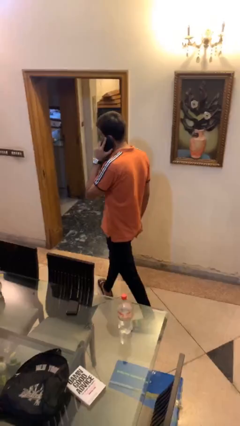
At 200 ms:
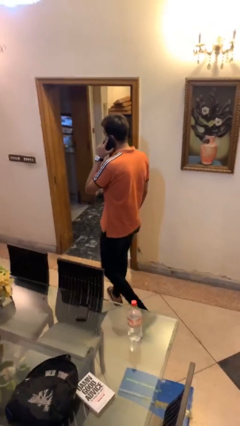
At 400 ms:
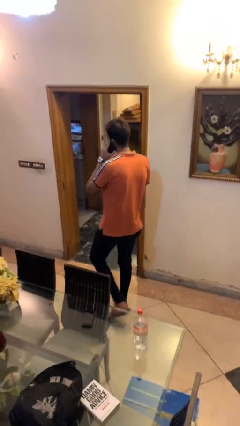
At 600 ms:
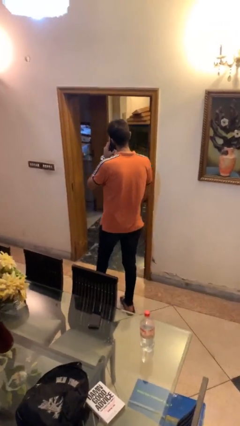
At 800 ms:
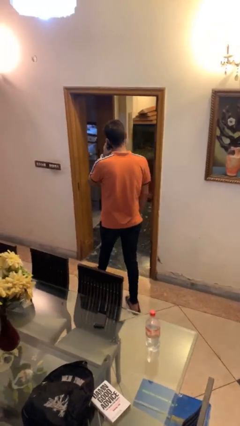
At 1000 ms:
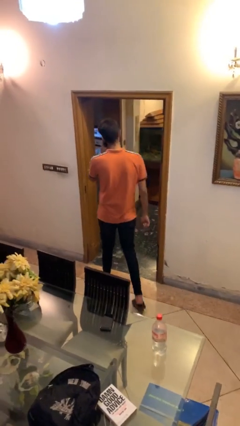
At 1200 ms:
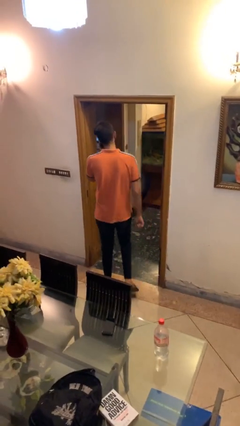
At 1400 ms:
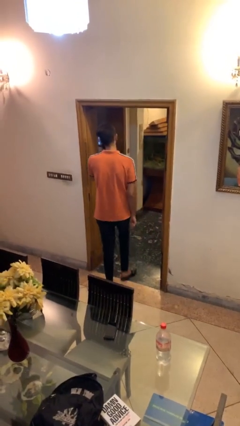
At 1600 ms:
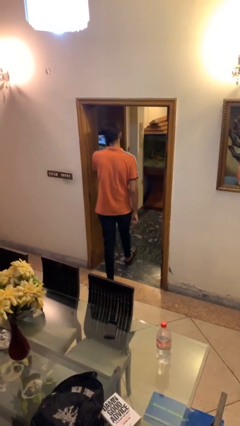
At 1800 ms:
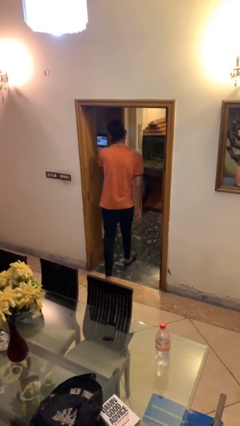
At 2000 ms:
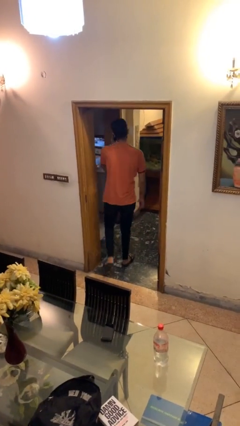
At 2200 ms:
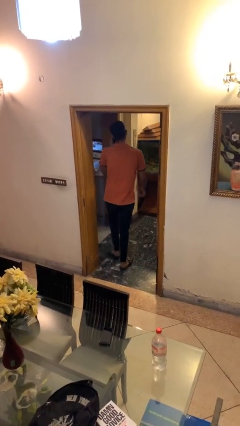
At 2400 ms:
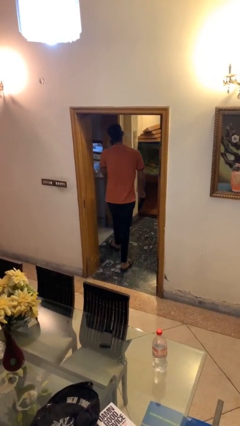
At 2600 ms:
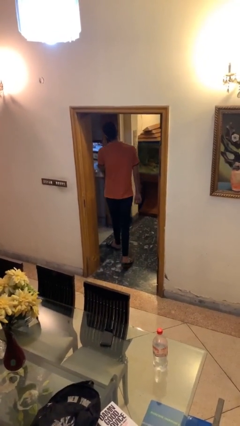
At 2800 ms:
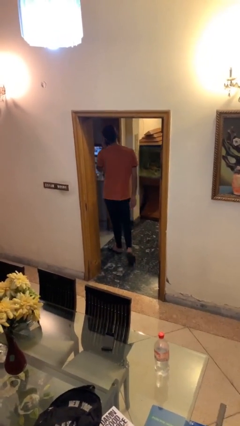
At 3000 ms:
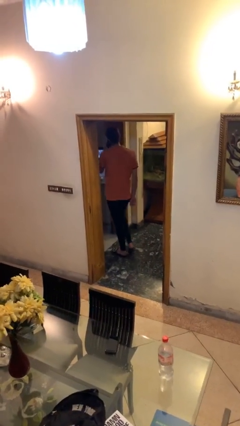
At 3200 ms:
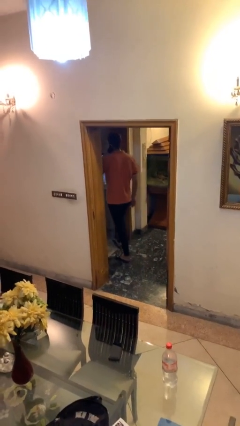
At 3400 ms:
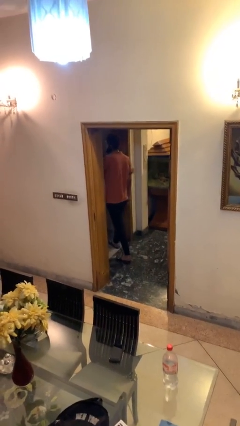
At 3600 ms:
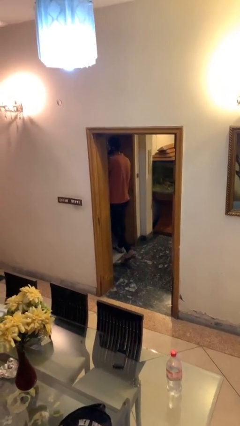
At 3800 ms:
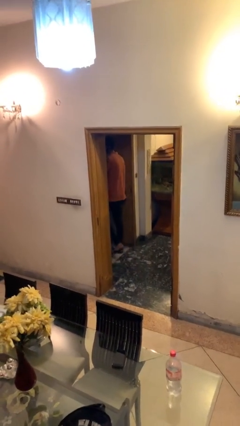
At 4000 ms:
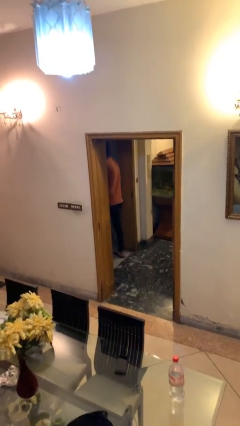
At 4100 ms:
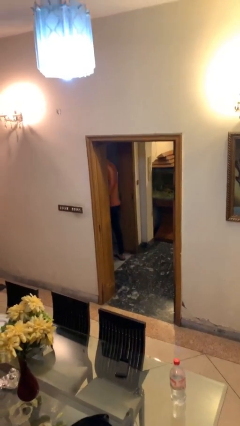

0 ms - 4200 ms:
person exits scene through structure

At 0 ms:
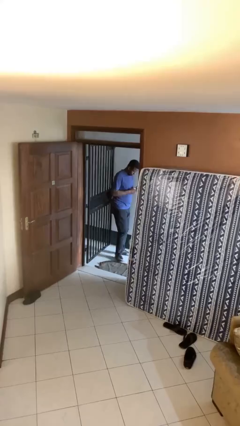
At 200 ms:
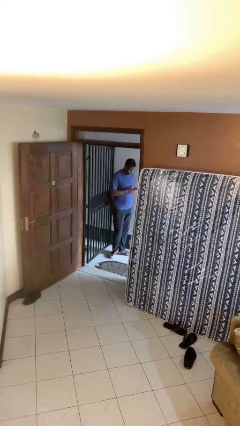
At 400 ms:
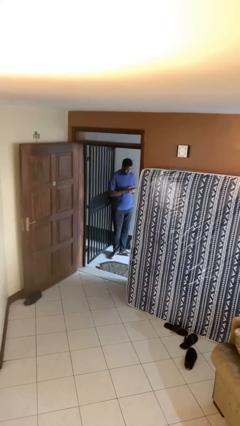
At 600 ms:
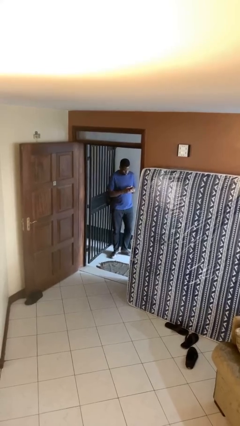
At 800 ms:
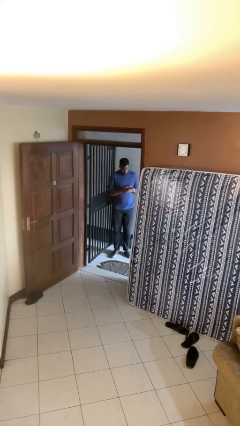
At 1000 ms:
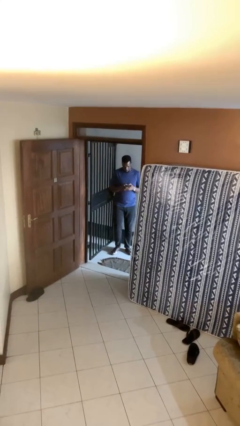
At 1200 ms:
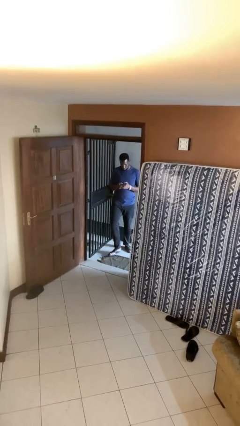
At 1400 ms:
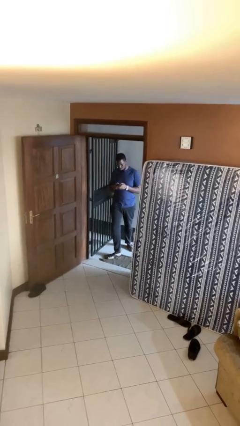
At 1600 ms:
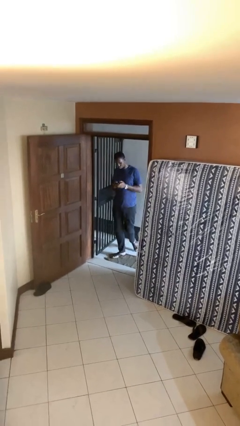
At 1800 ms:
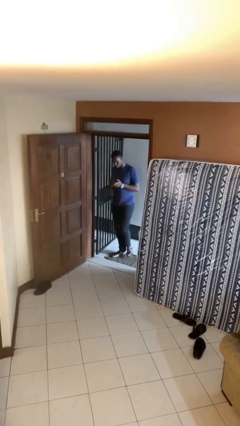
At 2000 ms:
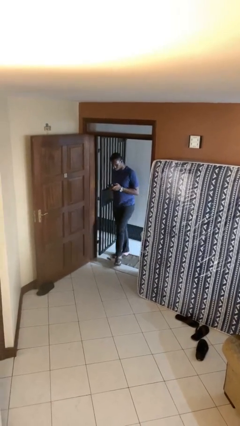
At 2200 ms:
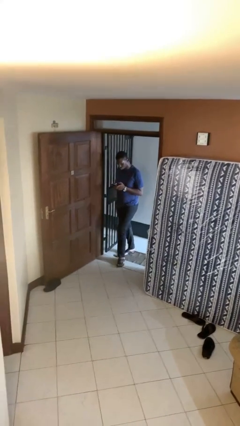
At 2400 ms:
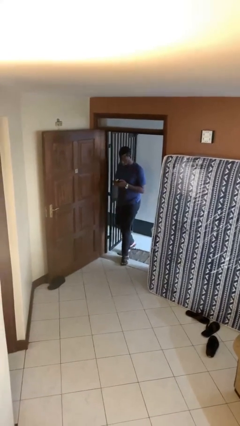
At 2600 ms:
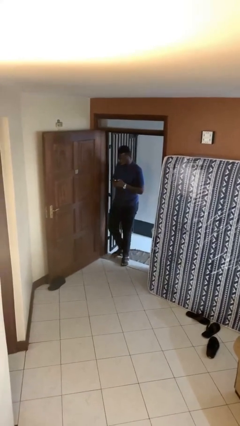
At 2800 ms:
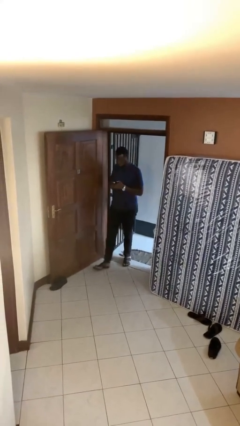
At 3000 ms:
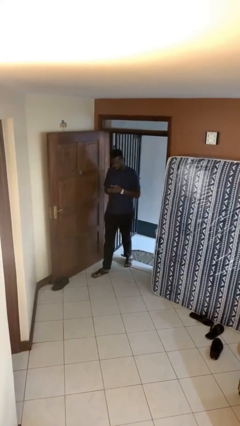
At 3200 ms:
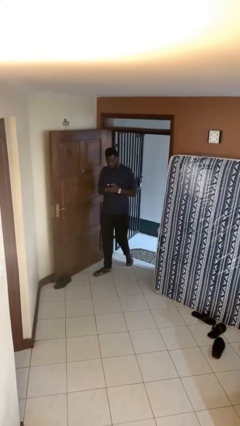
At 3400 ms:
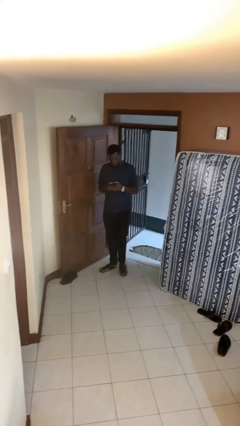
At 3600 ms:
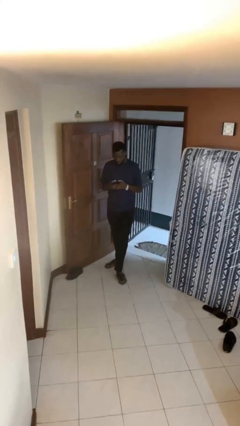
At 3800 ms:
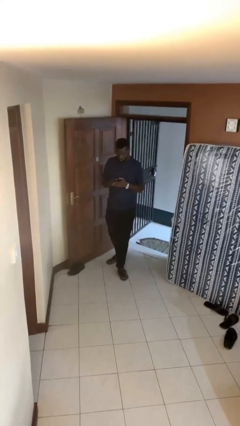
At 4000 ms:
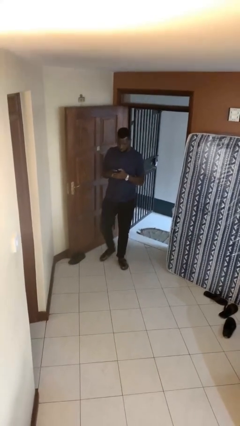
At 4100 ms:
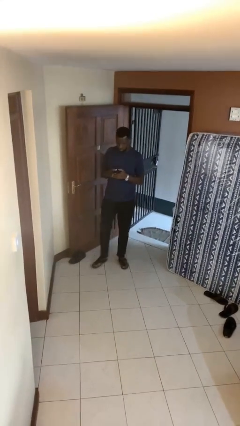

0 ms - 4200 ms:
person enters scene through structure

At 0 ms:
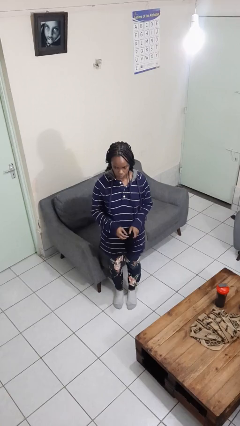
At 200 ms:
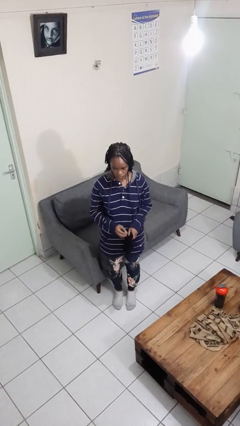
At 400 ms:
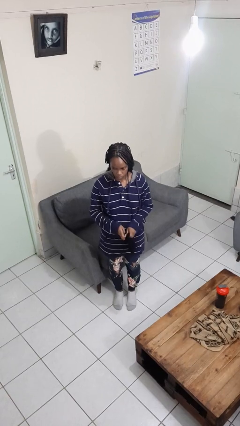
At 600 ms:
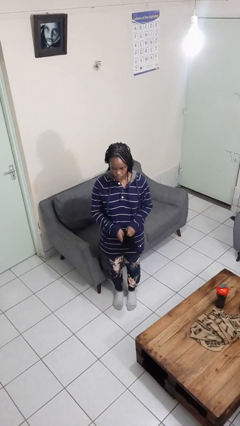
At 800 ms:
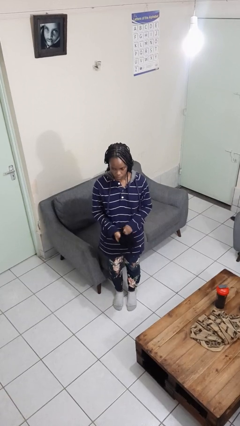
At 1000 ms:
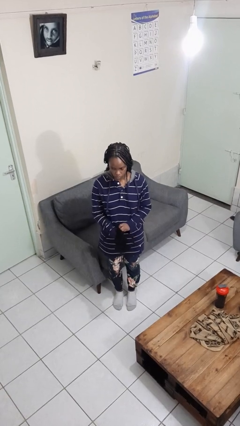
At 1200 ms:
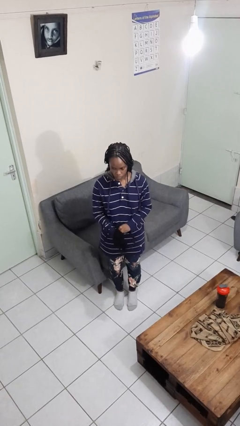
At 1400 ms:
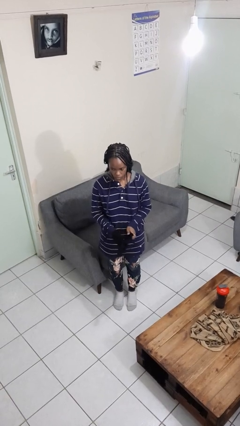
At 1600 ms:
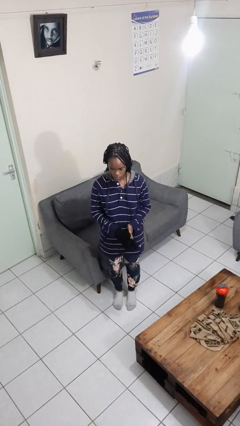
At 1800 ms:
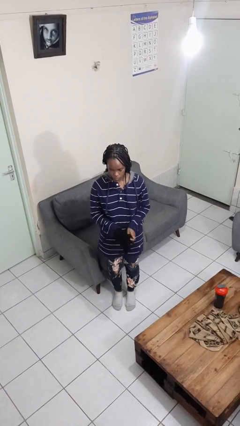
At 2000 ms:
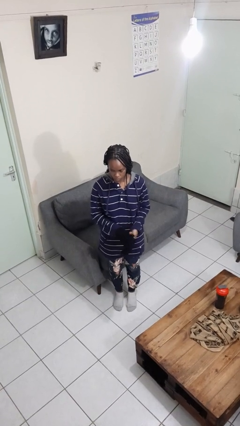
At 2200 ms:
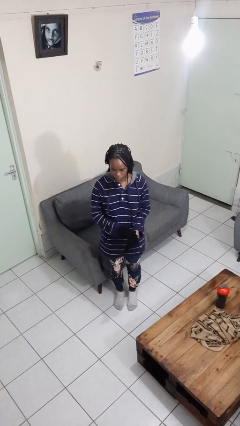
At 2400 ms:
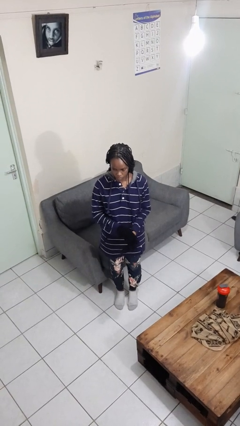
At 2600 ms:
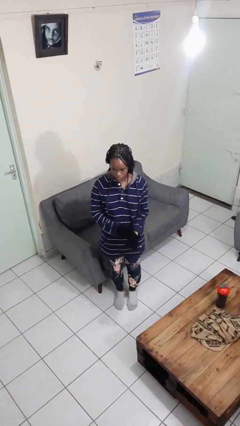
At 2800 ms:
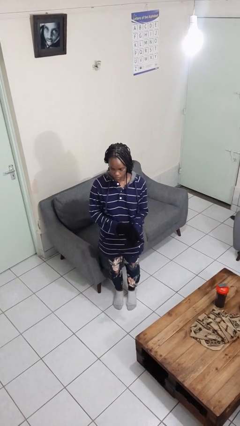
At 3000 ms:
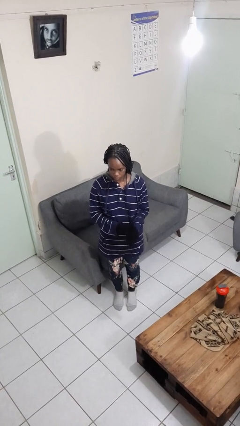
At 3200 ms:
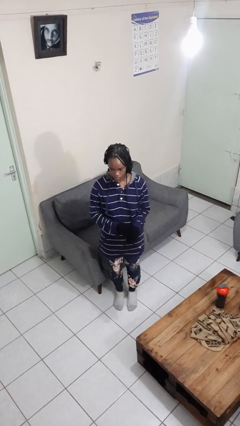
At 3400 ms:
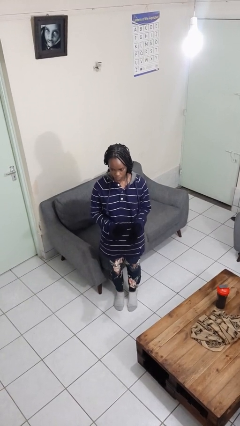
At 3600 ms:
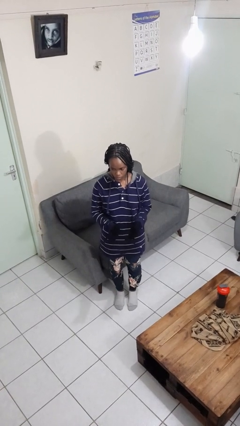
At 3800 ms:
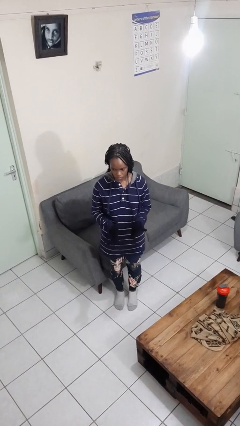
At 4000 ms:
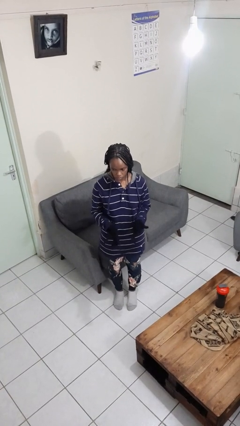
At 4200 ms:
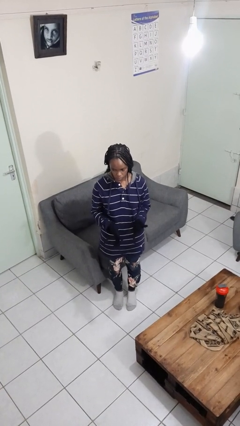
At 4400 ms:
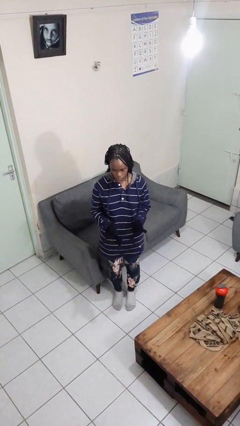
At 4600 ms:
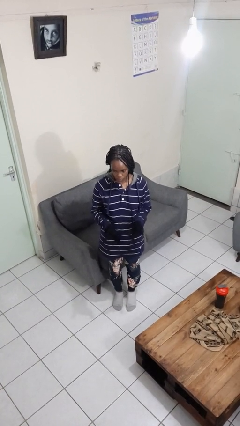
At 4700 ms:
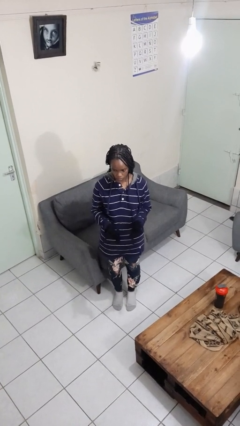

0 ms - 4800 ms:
person puts on gloves

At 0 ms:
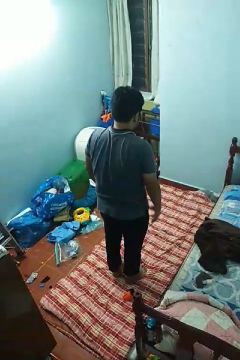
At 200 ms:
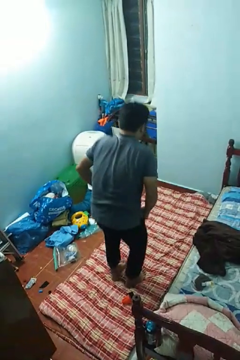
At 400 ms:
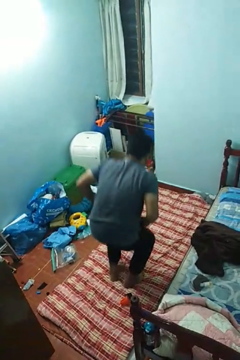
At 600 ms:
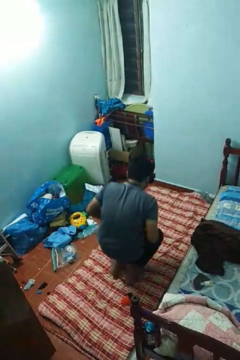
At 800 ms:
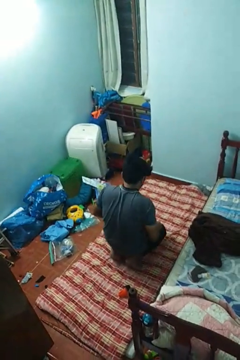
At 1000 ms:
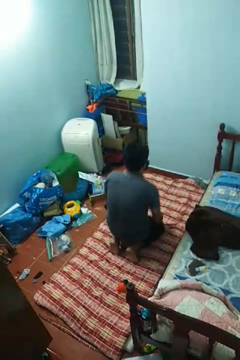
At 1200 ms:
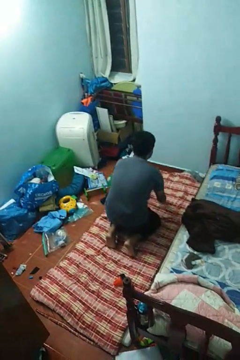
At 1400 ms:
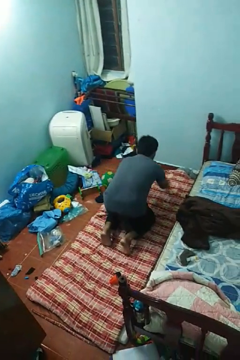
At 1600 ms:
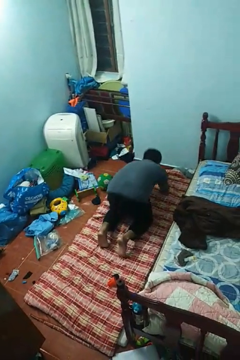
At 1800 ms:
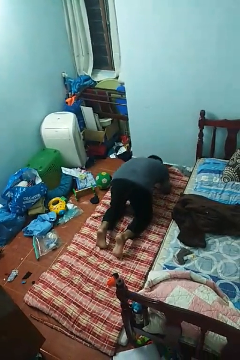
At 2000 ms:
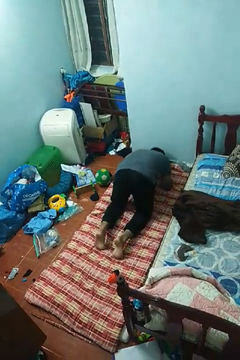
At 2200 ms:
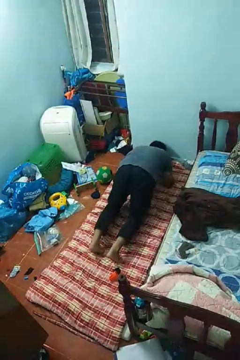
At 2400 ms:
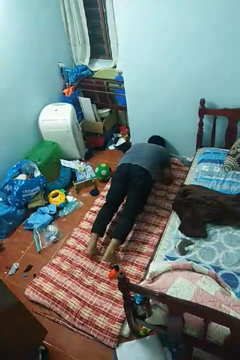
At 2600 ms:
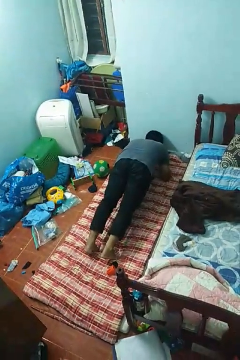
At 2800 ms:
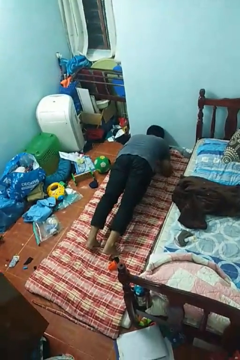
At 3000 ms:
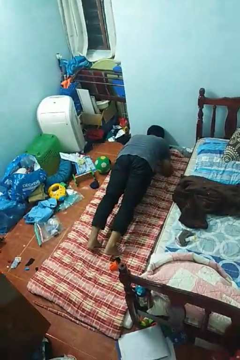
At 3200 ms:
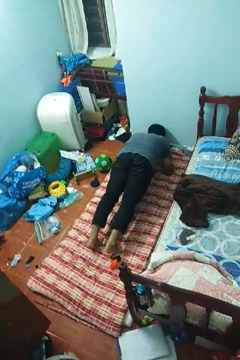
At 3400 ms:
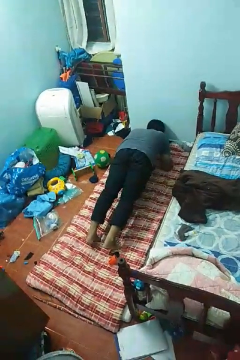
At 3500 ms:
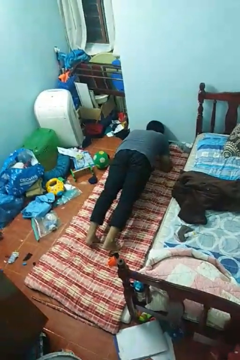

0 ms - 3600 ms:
person exercises with plank

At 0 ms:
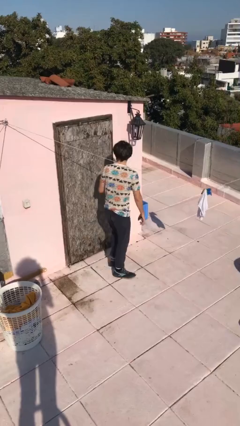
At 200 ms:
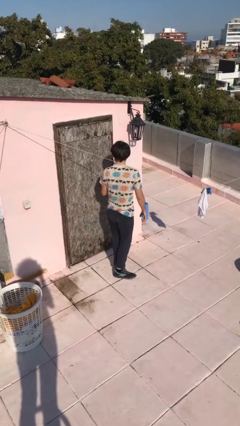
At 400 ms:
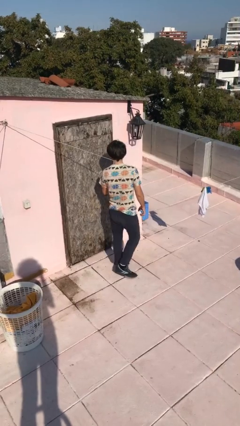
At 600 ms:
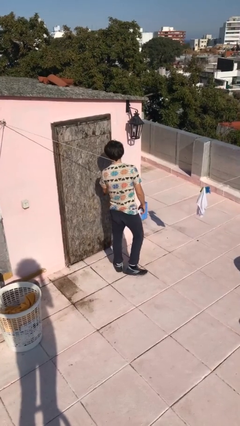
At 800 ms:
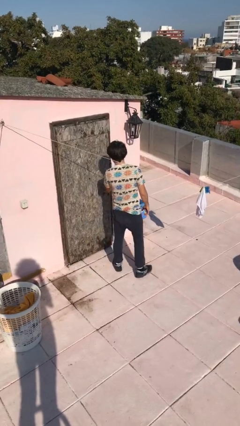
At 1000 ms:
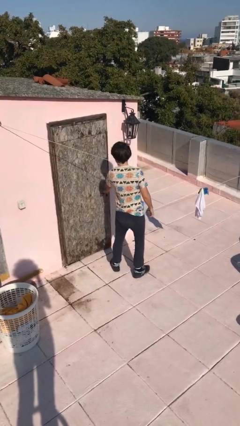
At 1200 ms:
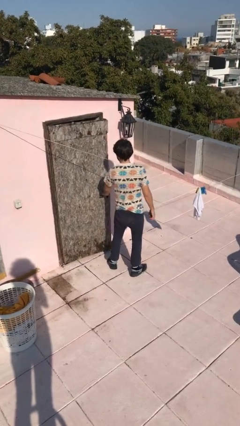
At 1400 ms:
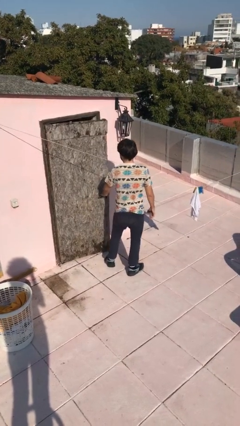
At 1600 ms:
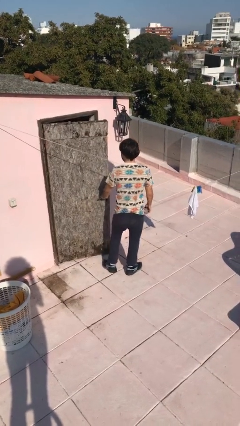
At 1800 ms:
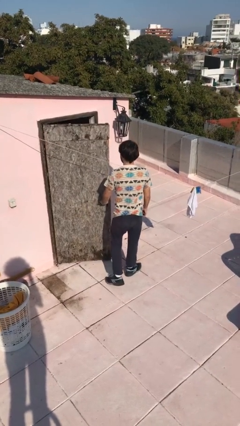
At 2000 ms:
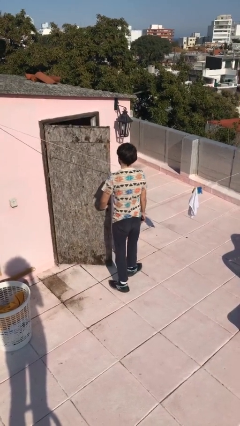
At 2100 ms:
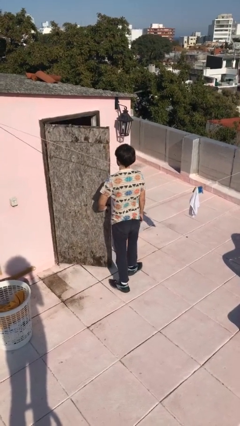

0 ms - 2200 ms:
person opens facility door
